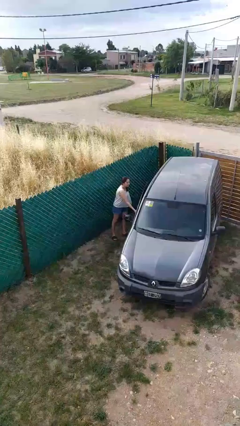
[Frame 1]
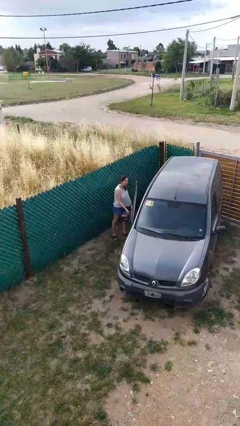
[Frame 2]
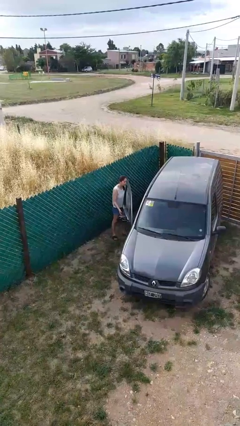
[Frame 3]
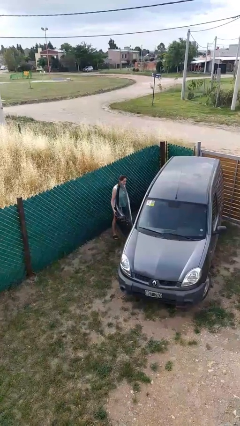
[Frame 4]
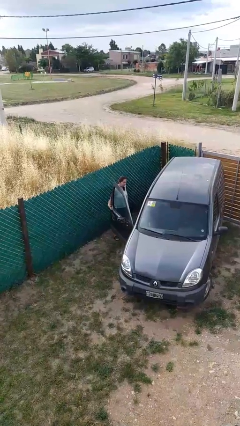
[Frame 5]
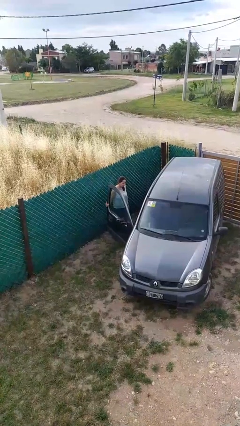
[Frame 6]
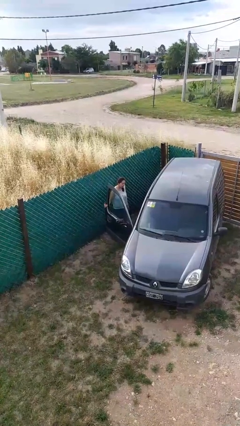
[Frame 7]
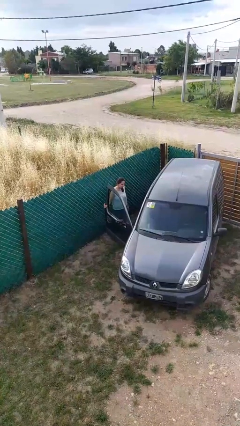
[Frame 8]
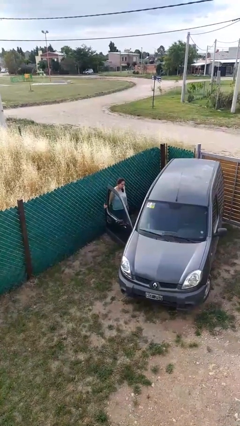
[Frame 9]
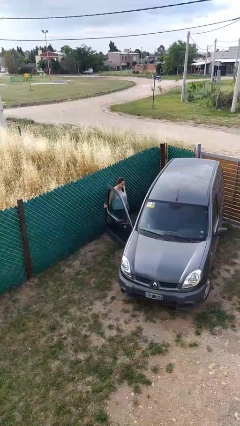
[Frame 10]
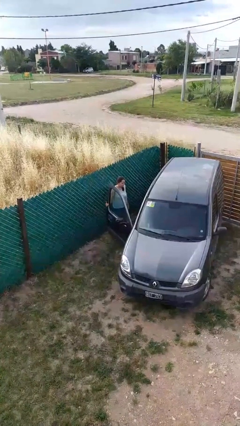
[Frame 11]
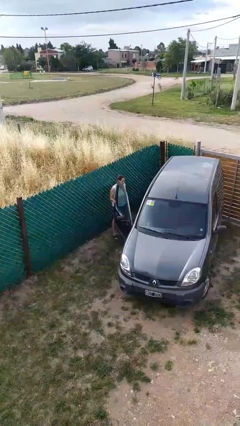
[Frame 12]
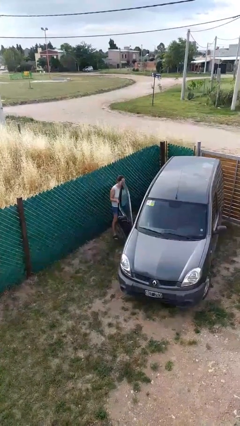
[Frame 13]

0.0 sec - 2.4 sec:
person opens car door

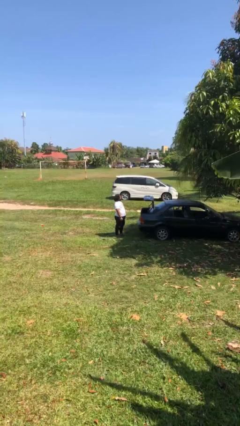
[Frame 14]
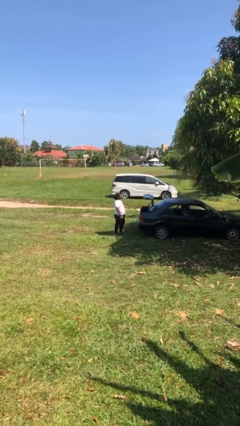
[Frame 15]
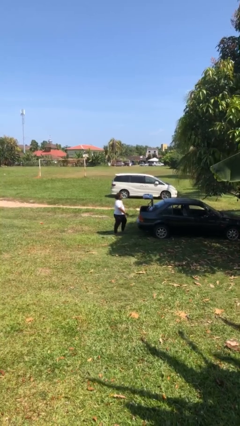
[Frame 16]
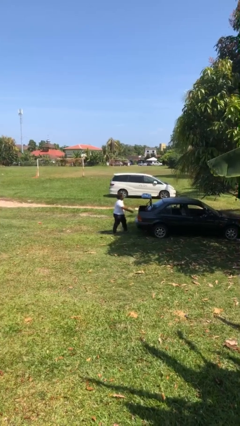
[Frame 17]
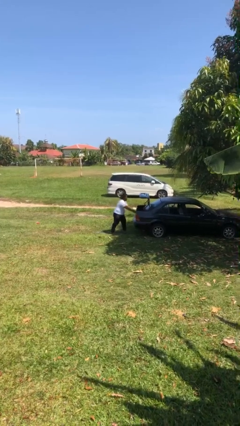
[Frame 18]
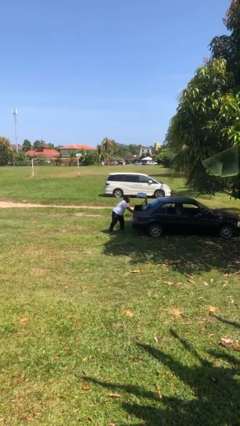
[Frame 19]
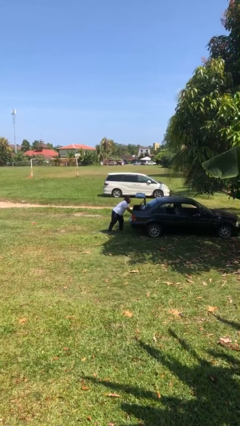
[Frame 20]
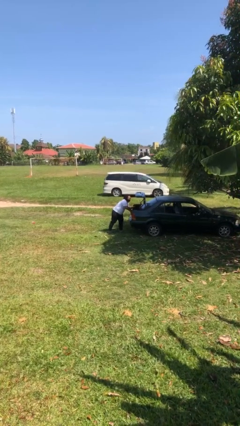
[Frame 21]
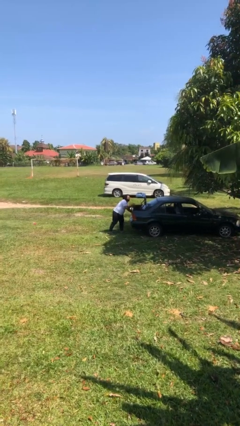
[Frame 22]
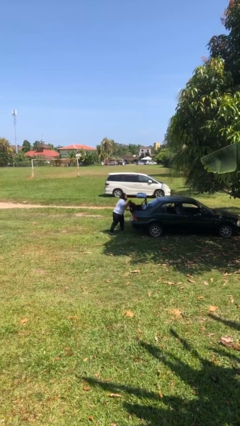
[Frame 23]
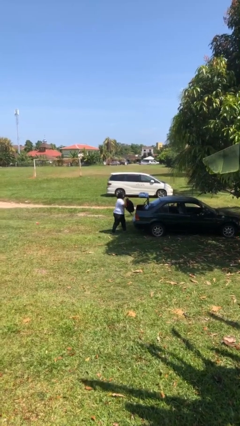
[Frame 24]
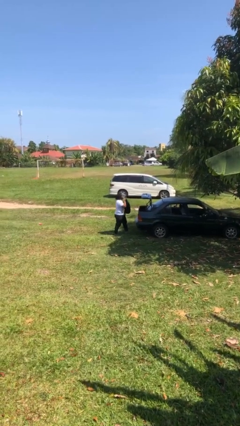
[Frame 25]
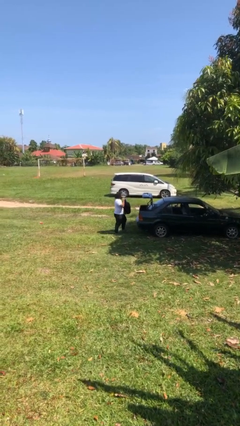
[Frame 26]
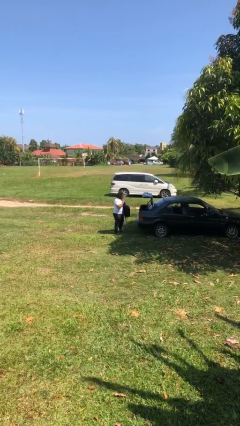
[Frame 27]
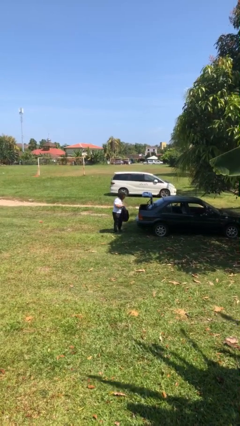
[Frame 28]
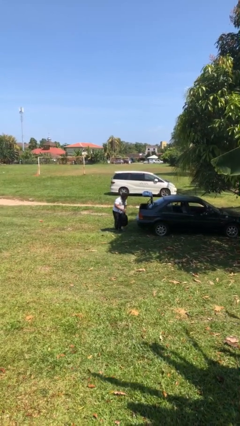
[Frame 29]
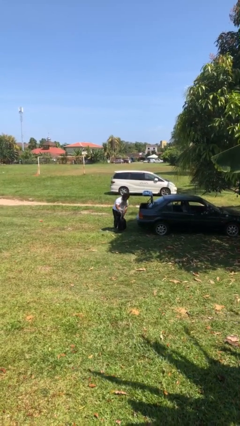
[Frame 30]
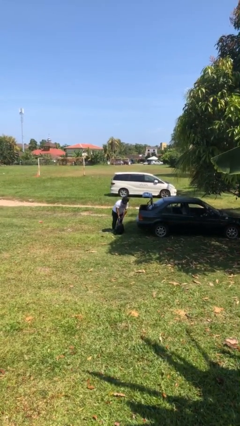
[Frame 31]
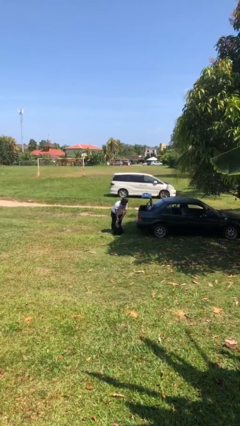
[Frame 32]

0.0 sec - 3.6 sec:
person unloads car

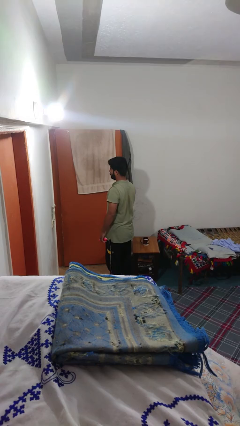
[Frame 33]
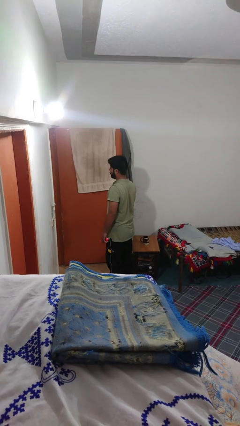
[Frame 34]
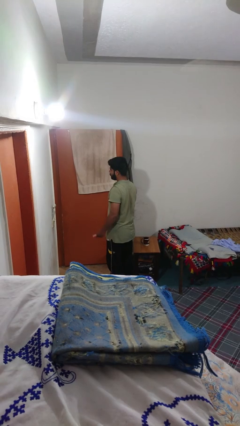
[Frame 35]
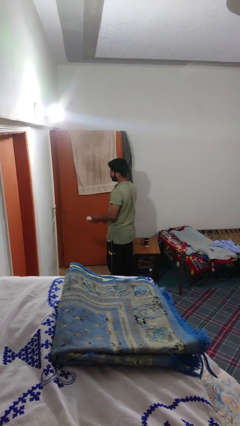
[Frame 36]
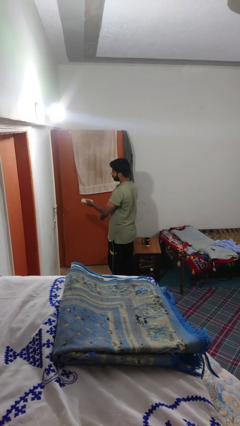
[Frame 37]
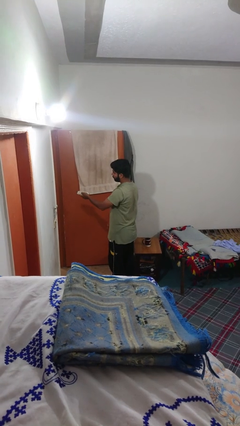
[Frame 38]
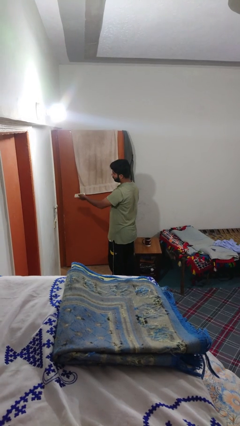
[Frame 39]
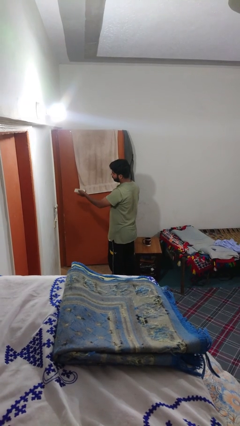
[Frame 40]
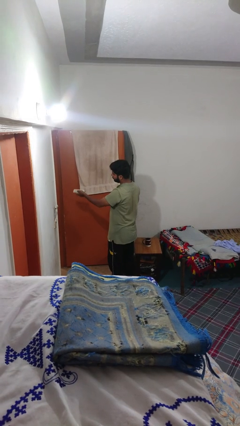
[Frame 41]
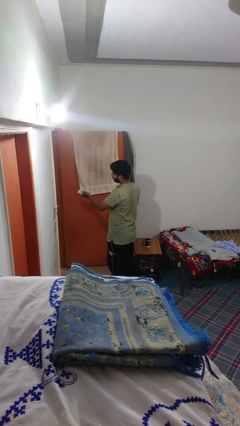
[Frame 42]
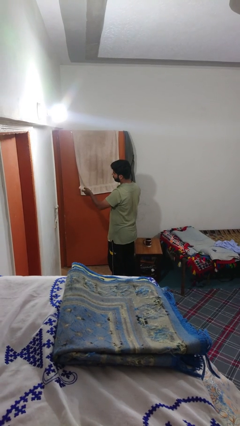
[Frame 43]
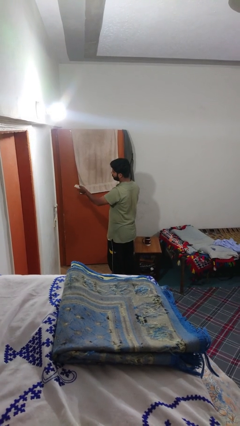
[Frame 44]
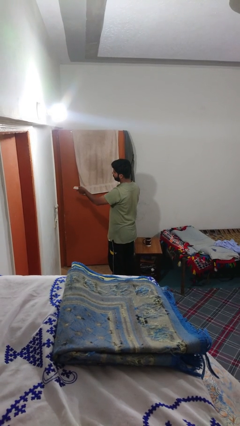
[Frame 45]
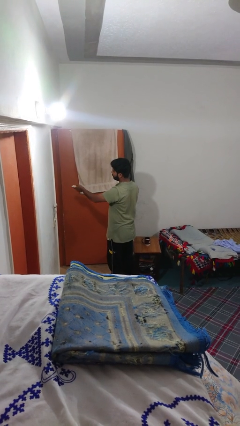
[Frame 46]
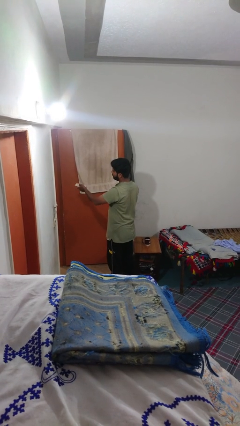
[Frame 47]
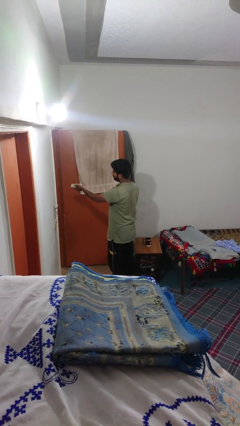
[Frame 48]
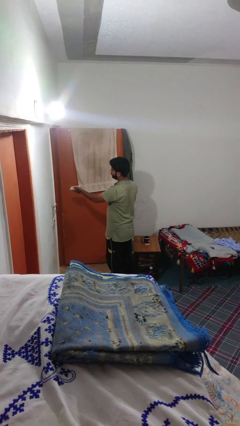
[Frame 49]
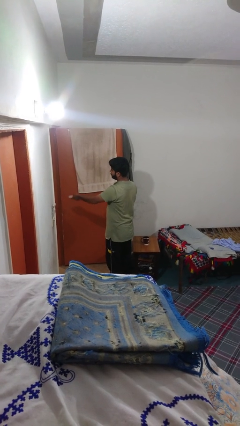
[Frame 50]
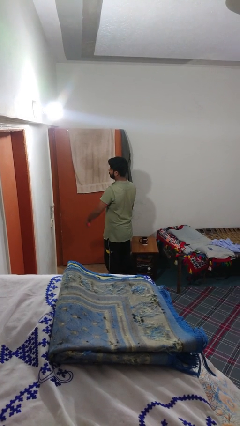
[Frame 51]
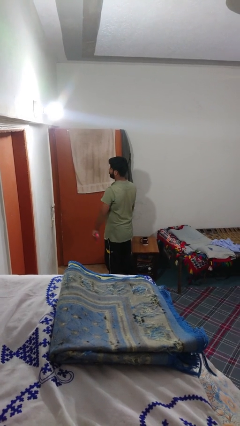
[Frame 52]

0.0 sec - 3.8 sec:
person uses television remote

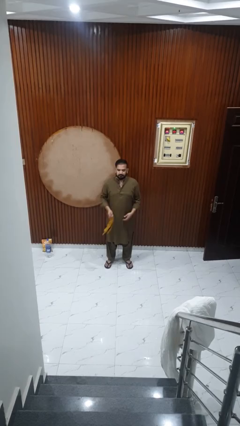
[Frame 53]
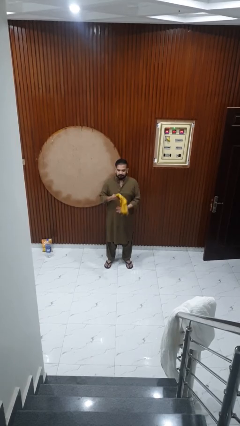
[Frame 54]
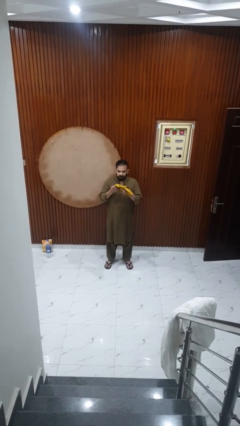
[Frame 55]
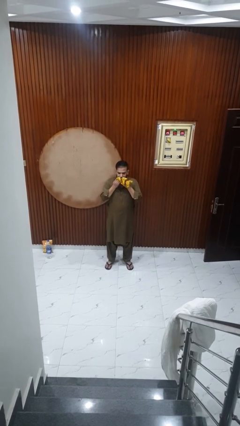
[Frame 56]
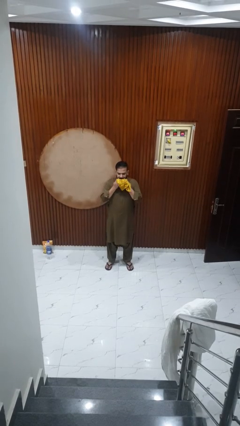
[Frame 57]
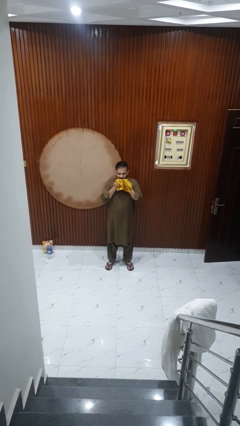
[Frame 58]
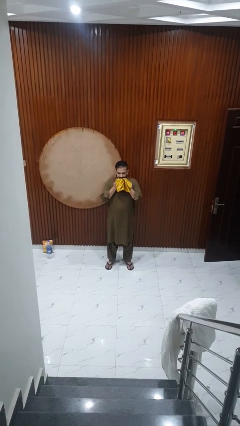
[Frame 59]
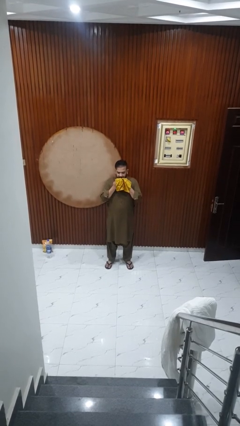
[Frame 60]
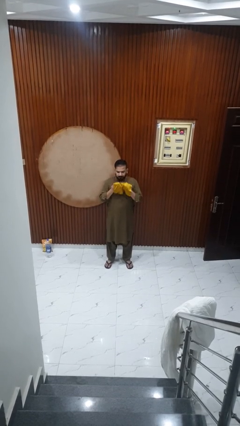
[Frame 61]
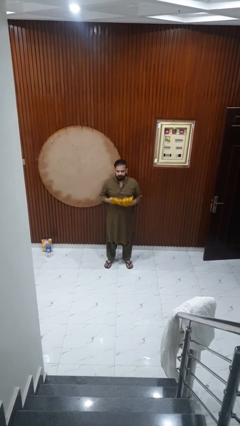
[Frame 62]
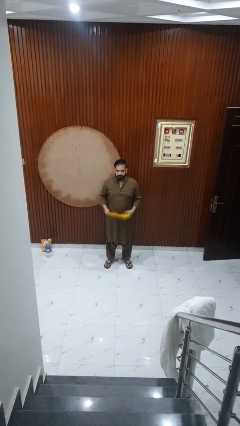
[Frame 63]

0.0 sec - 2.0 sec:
person wipes mouth with napkin

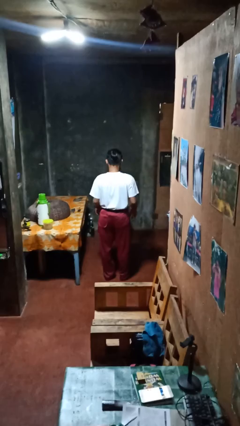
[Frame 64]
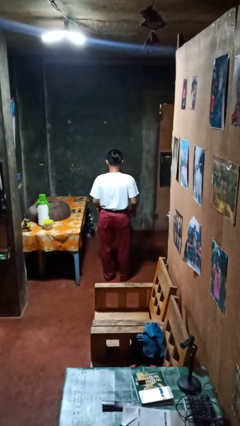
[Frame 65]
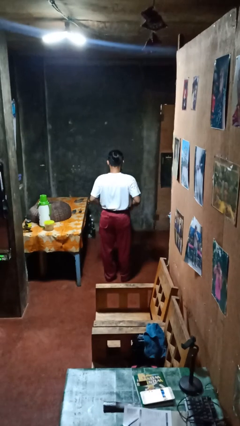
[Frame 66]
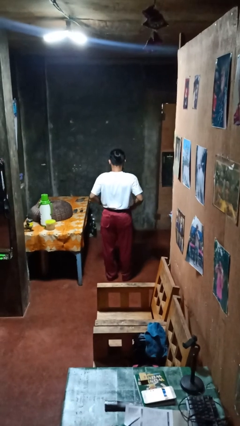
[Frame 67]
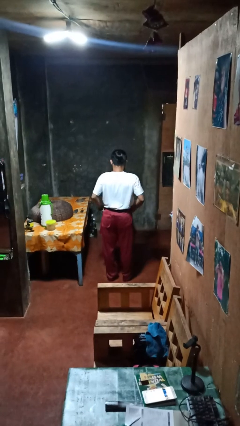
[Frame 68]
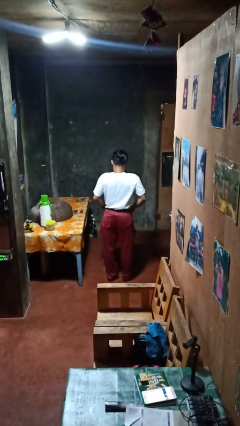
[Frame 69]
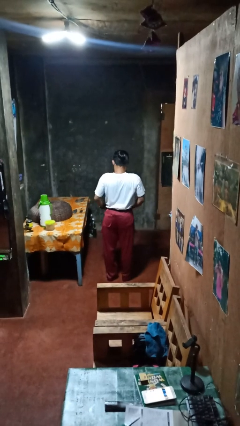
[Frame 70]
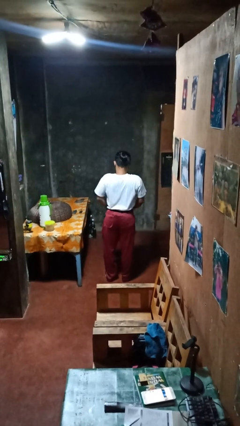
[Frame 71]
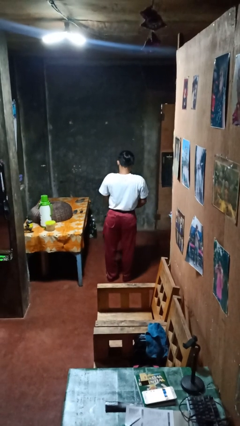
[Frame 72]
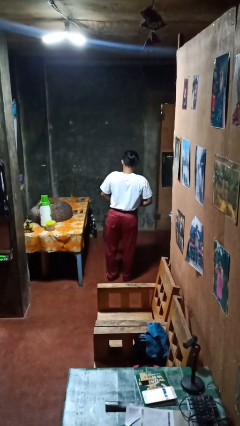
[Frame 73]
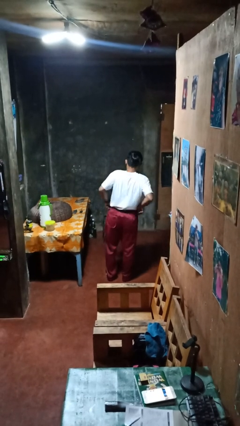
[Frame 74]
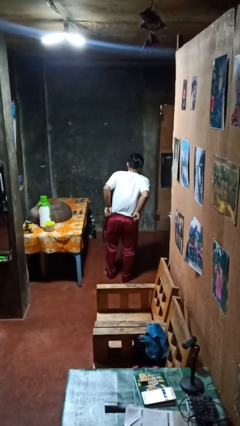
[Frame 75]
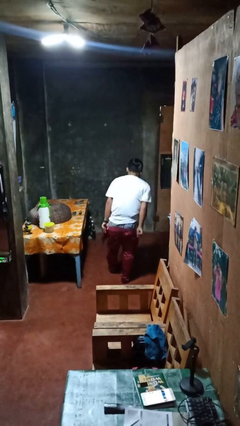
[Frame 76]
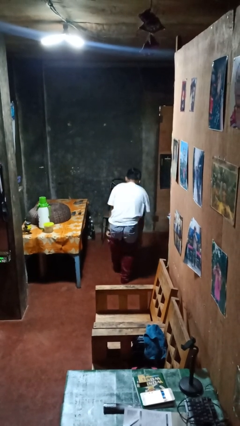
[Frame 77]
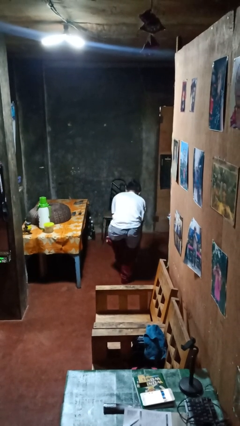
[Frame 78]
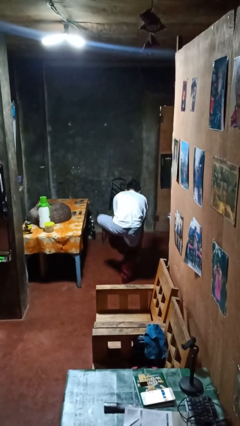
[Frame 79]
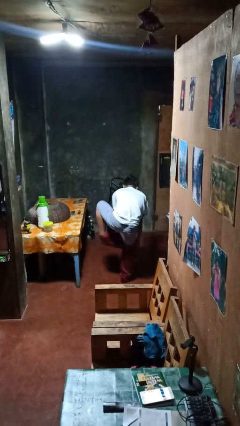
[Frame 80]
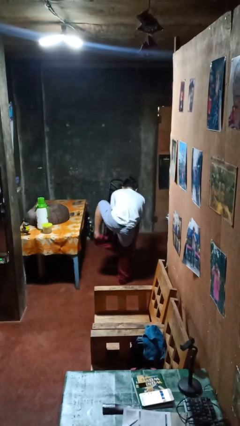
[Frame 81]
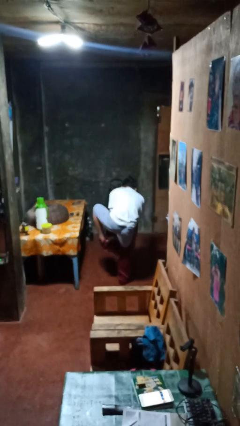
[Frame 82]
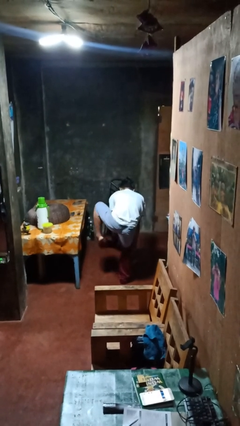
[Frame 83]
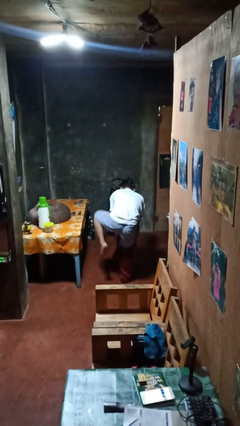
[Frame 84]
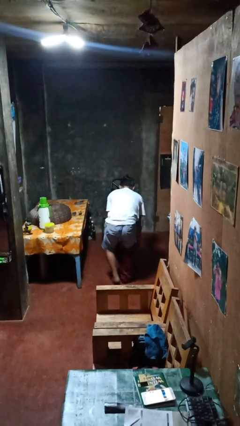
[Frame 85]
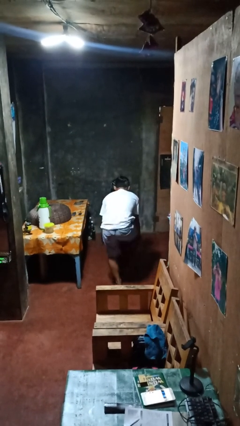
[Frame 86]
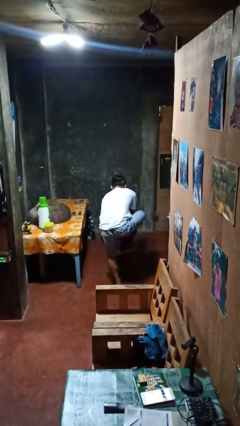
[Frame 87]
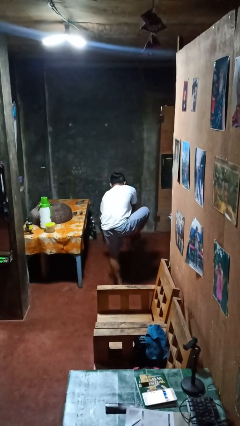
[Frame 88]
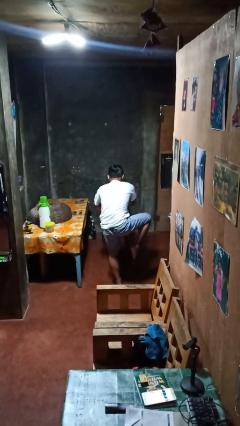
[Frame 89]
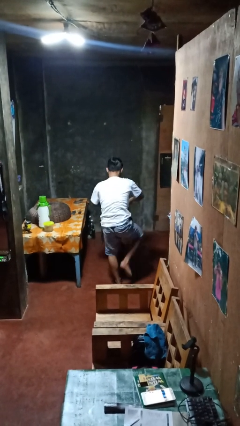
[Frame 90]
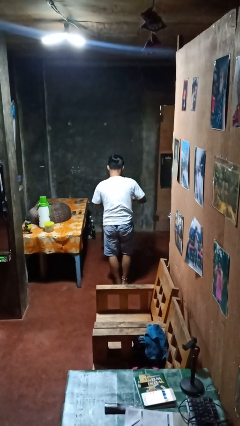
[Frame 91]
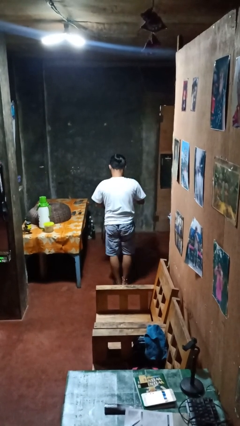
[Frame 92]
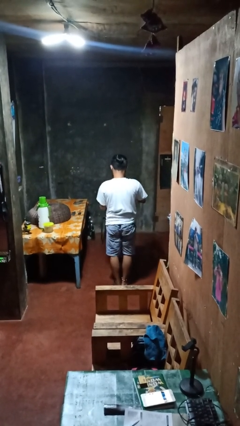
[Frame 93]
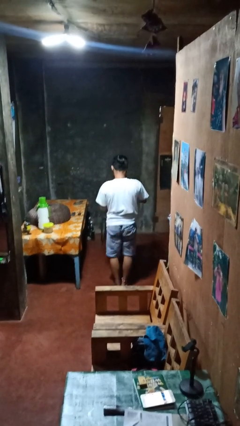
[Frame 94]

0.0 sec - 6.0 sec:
person takes off pants
